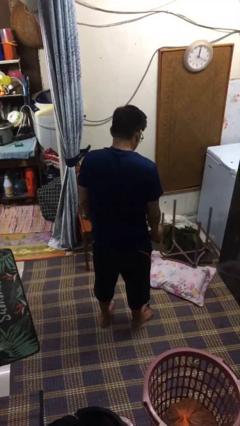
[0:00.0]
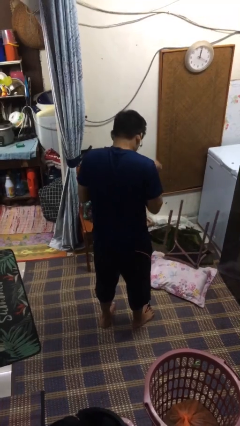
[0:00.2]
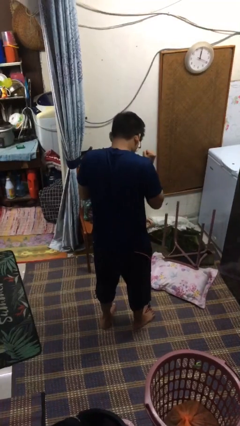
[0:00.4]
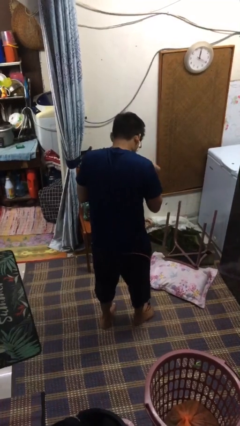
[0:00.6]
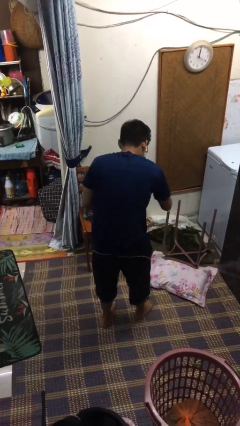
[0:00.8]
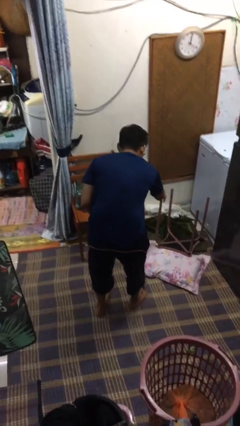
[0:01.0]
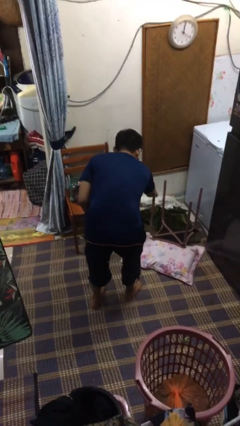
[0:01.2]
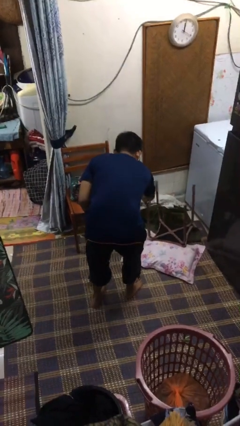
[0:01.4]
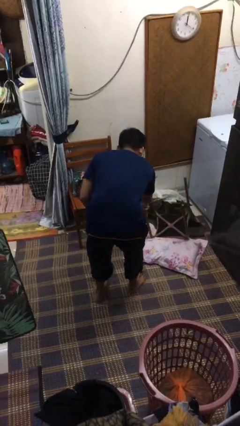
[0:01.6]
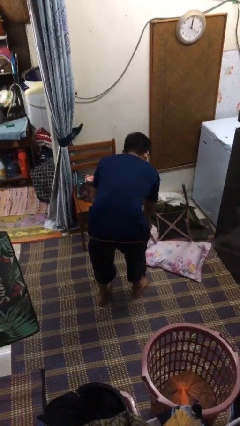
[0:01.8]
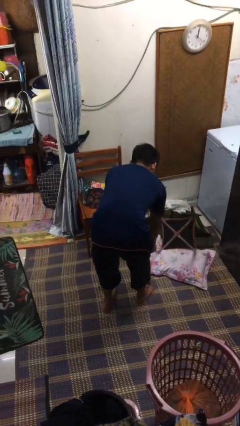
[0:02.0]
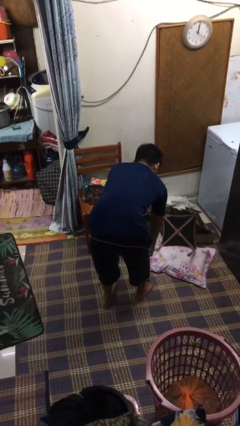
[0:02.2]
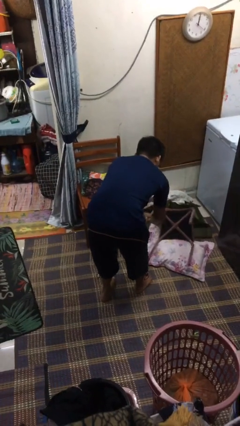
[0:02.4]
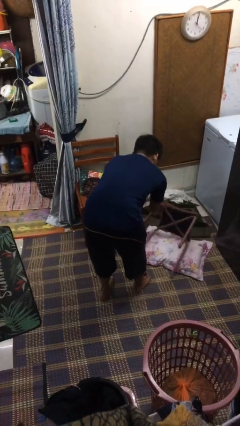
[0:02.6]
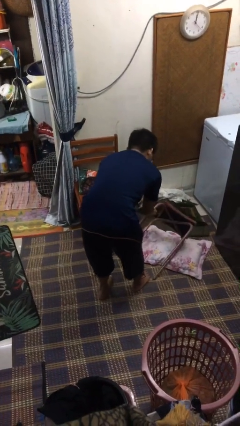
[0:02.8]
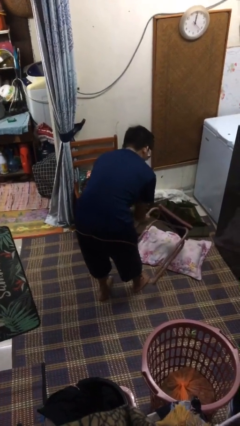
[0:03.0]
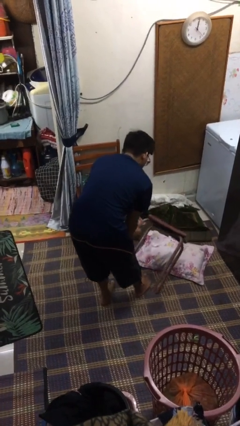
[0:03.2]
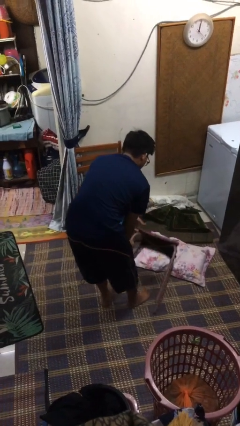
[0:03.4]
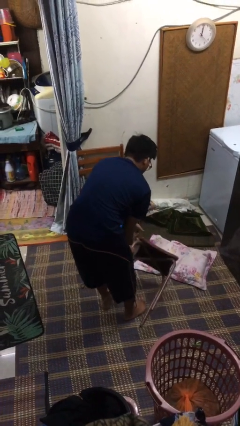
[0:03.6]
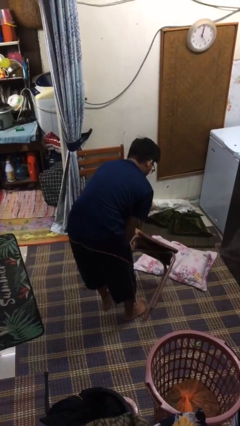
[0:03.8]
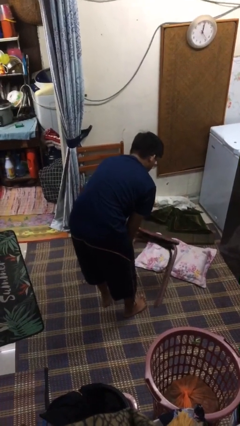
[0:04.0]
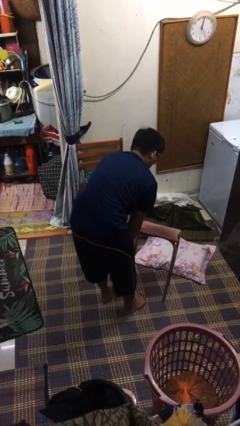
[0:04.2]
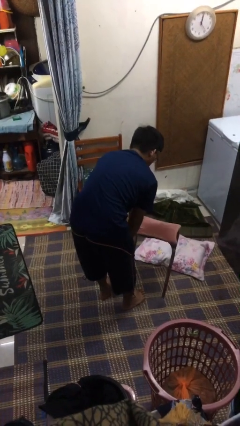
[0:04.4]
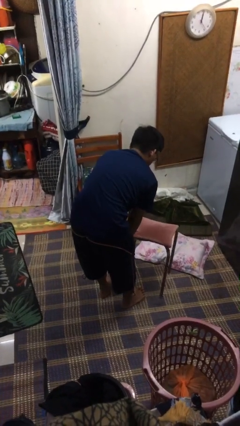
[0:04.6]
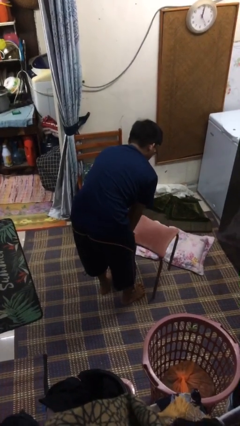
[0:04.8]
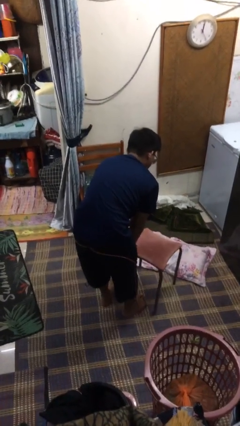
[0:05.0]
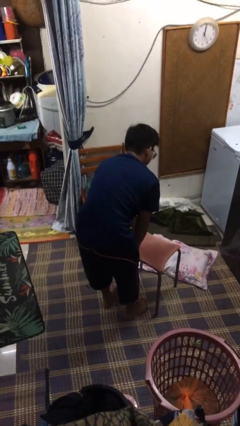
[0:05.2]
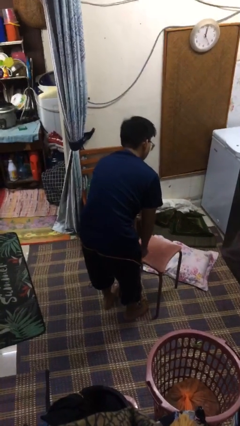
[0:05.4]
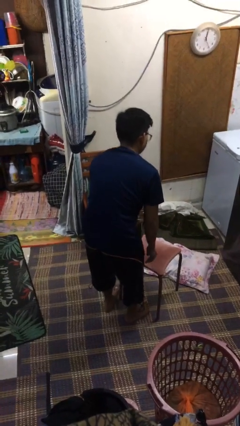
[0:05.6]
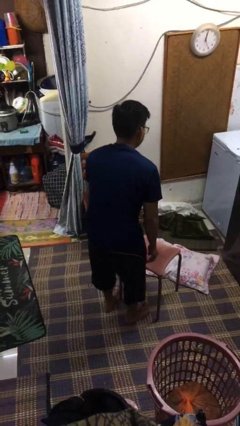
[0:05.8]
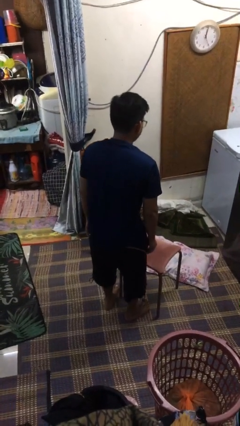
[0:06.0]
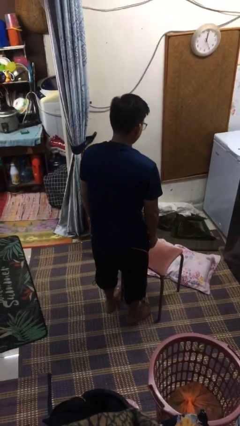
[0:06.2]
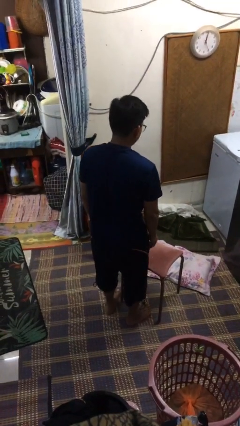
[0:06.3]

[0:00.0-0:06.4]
person sets upright furniture

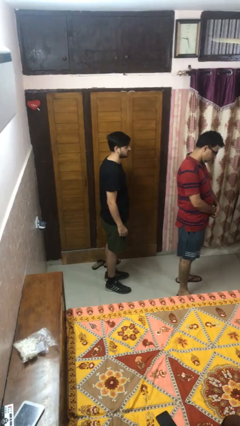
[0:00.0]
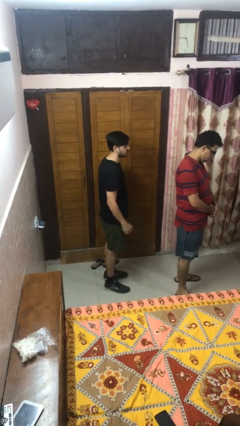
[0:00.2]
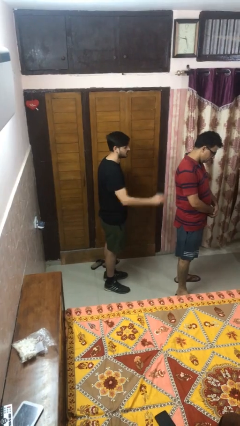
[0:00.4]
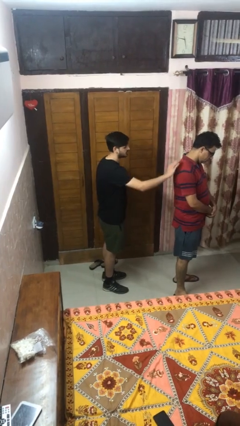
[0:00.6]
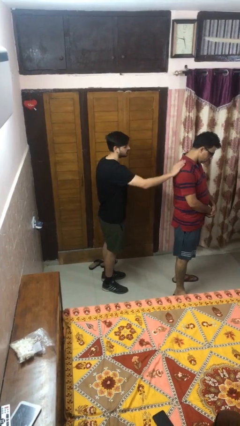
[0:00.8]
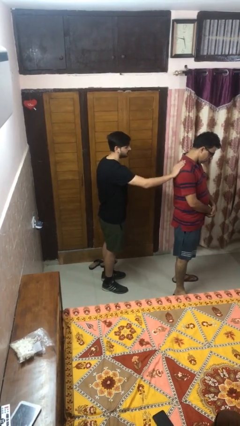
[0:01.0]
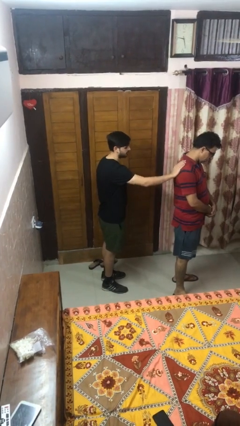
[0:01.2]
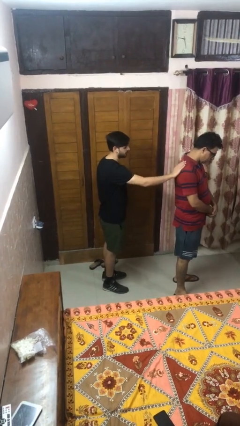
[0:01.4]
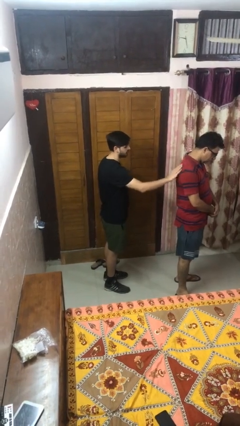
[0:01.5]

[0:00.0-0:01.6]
person touches back of person

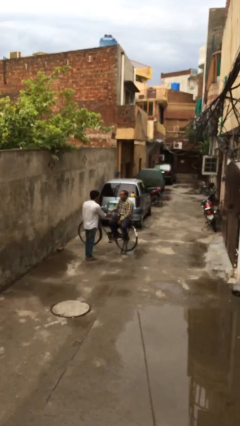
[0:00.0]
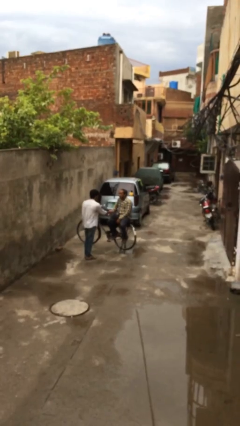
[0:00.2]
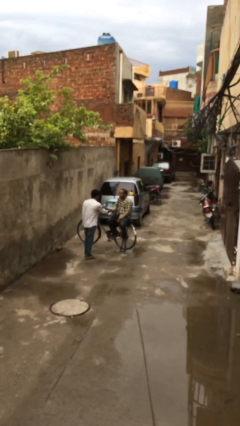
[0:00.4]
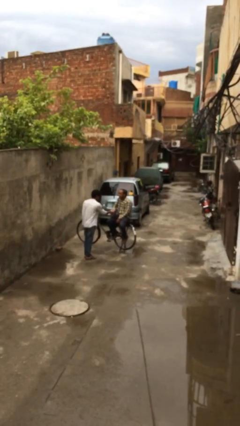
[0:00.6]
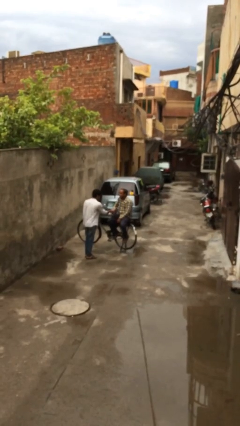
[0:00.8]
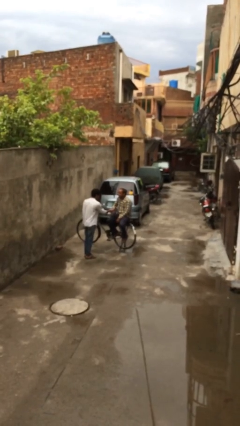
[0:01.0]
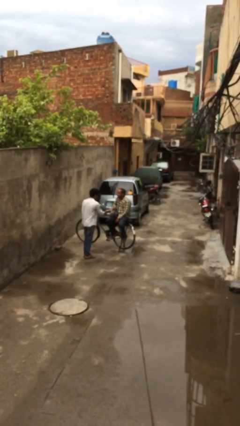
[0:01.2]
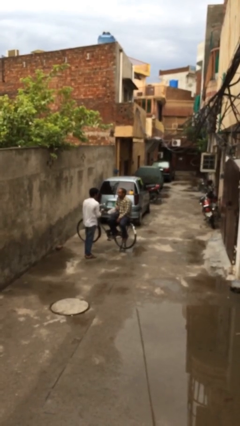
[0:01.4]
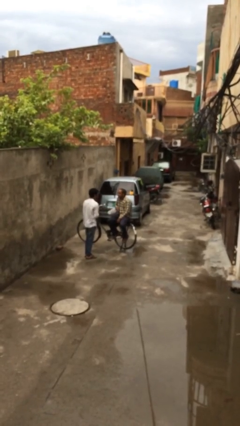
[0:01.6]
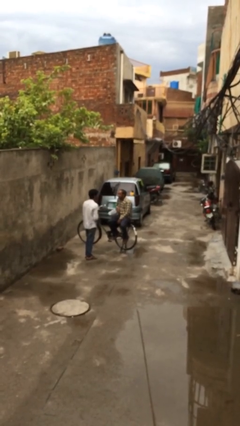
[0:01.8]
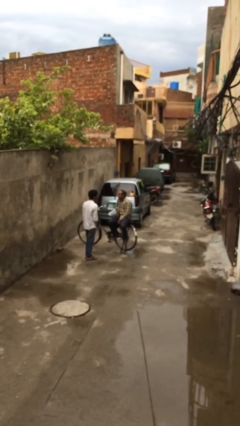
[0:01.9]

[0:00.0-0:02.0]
person shakes hand

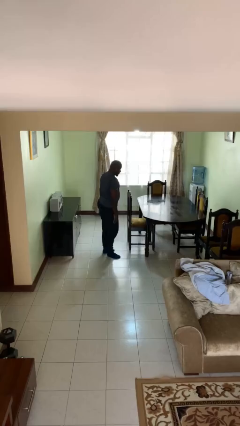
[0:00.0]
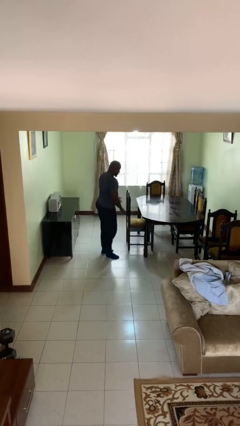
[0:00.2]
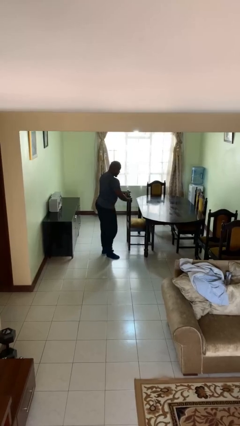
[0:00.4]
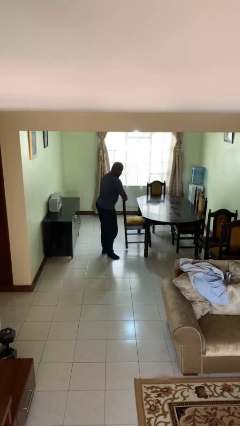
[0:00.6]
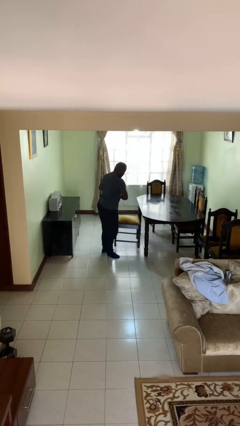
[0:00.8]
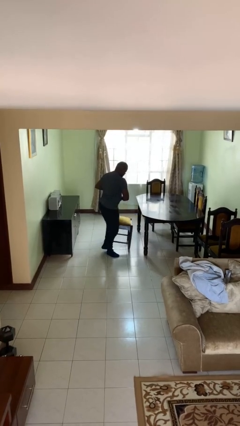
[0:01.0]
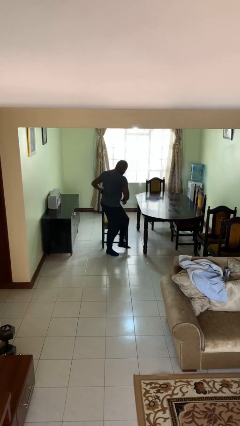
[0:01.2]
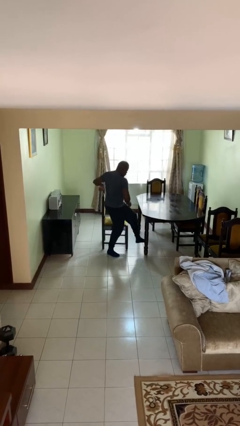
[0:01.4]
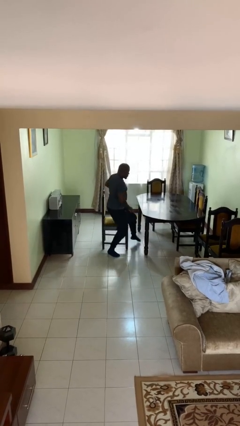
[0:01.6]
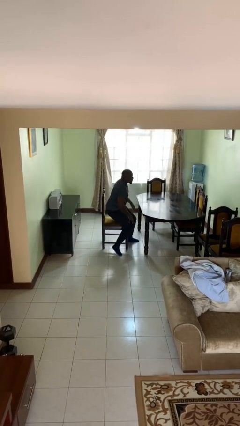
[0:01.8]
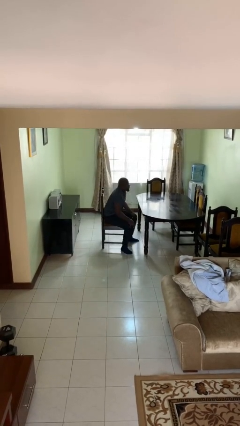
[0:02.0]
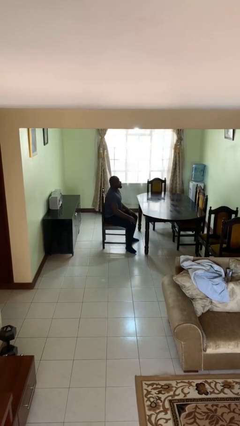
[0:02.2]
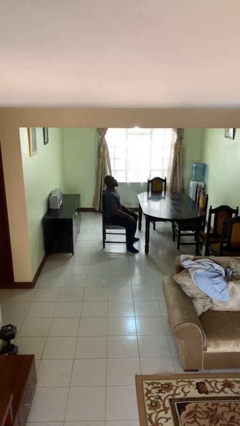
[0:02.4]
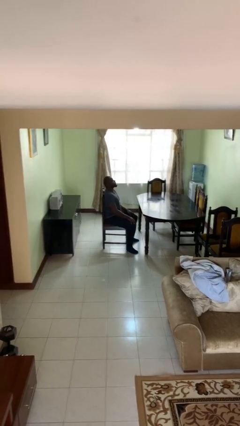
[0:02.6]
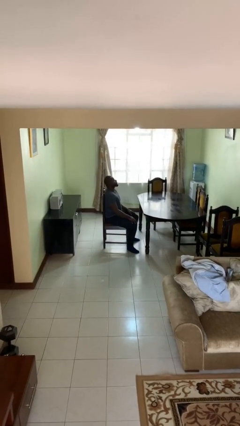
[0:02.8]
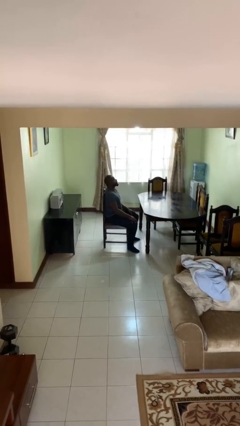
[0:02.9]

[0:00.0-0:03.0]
person sits down

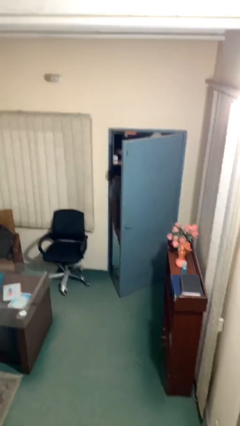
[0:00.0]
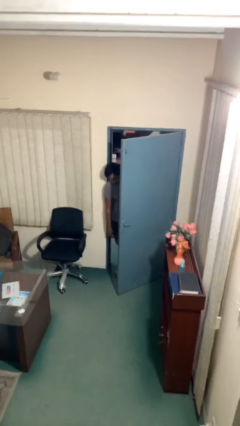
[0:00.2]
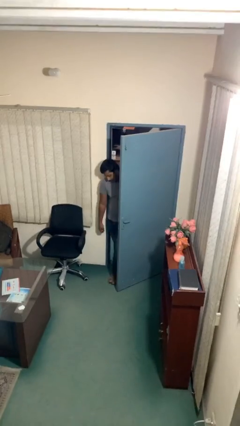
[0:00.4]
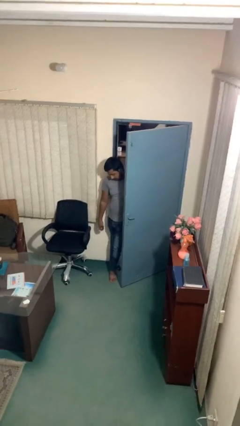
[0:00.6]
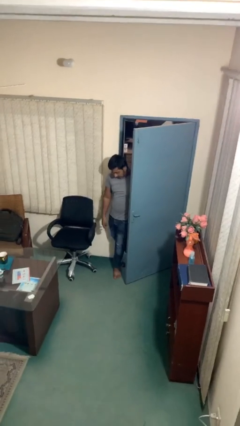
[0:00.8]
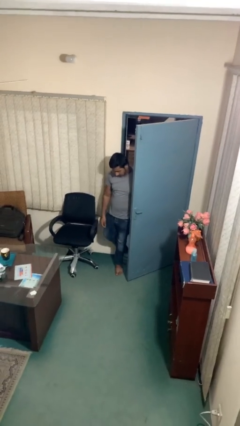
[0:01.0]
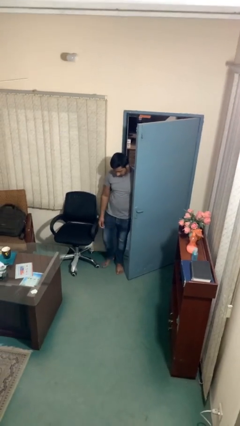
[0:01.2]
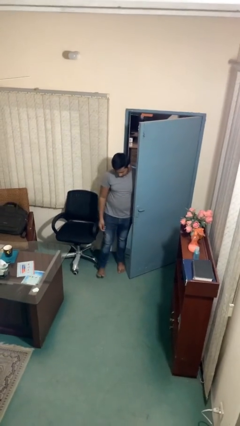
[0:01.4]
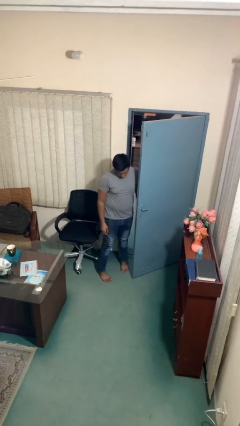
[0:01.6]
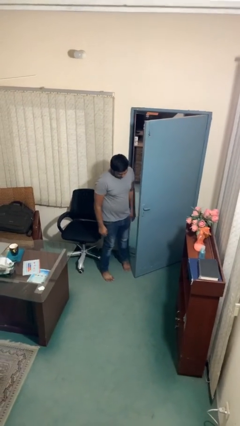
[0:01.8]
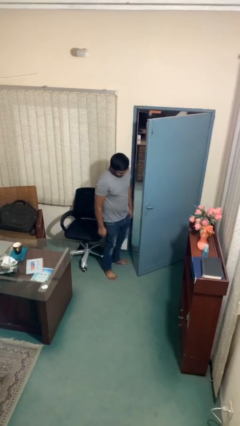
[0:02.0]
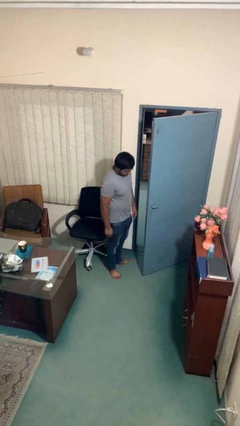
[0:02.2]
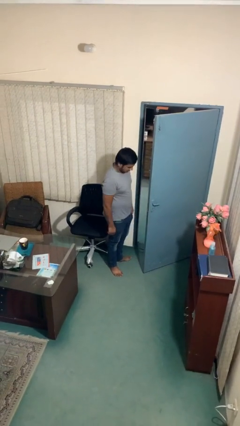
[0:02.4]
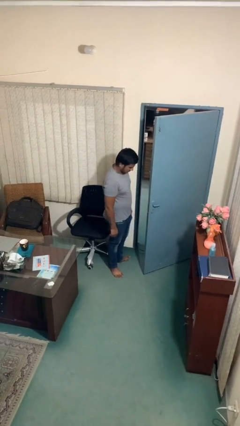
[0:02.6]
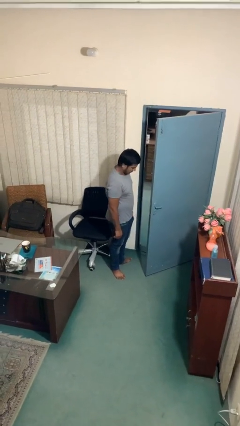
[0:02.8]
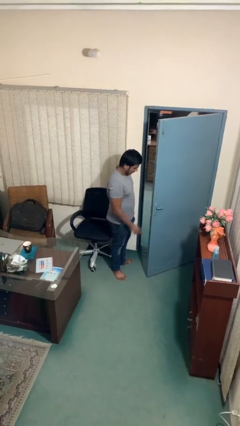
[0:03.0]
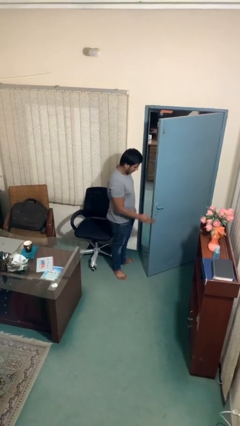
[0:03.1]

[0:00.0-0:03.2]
person enters scene through structure

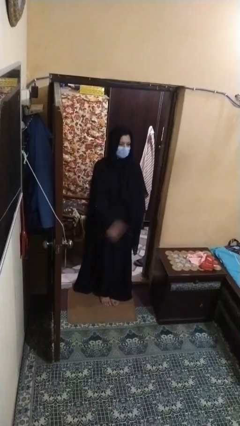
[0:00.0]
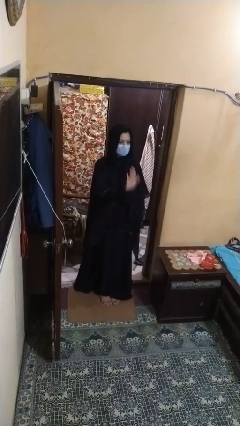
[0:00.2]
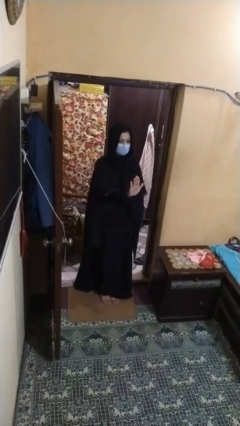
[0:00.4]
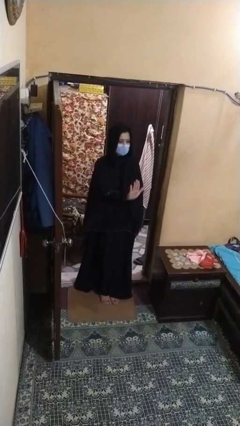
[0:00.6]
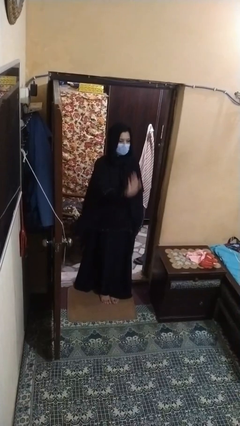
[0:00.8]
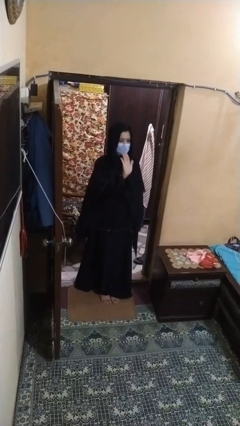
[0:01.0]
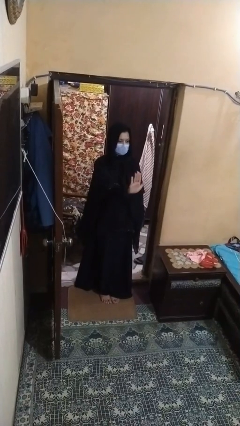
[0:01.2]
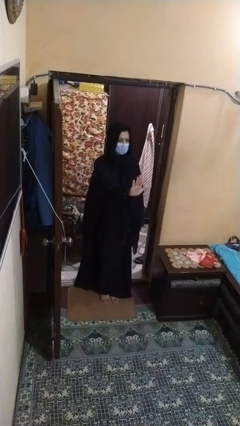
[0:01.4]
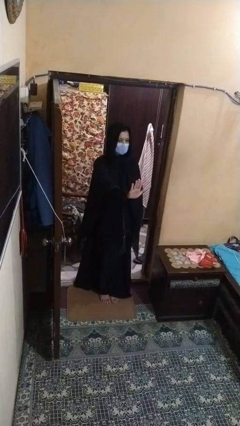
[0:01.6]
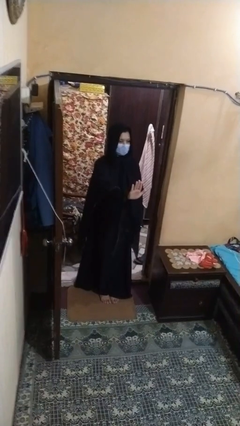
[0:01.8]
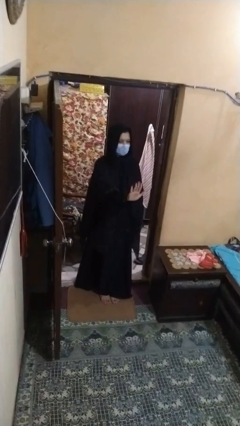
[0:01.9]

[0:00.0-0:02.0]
person gestures stop
